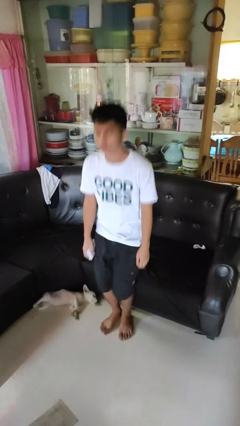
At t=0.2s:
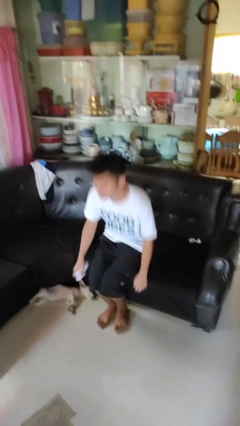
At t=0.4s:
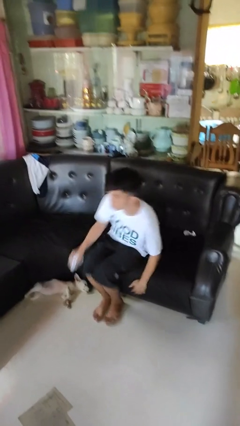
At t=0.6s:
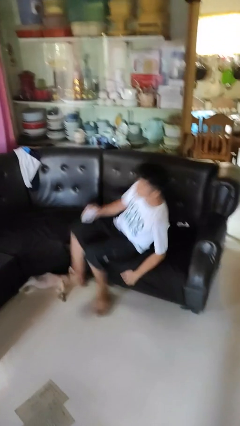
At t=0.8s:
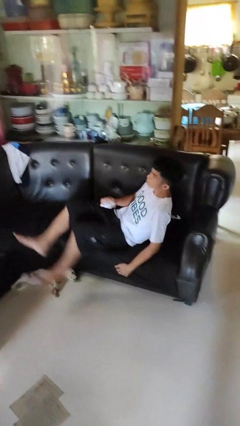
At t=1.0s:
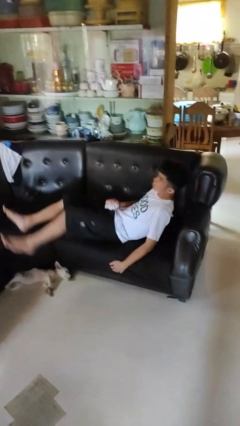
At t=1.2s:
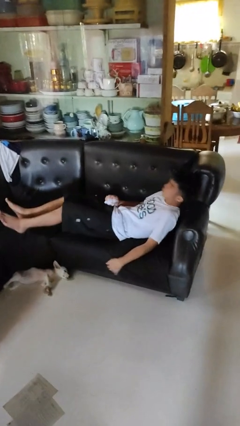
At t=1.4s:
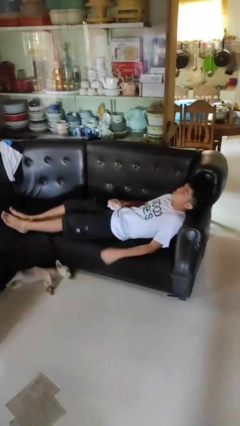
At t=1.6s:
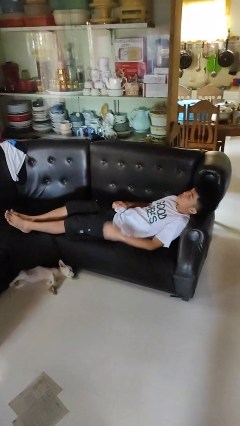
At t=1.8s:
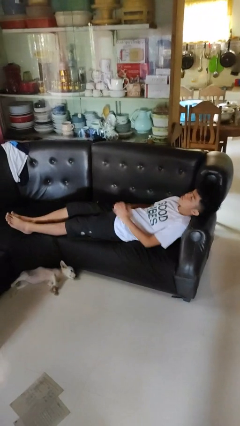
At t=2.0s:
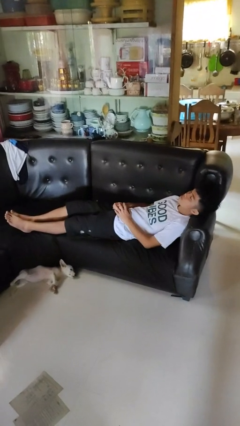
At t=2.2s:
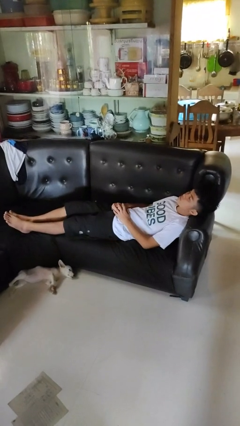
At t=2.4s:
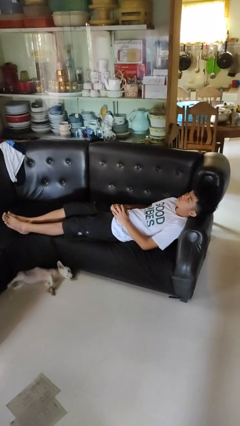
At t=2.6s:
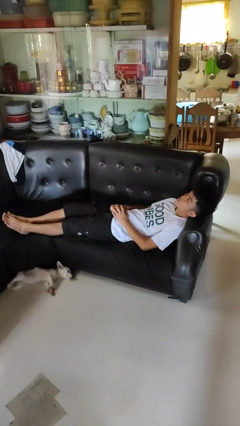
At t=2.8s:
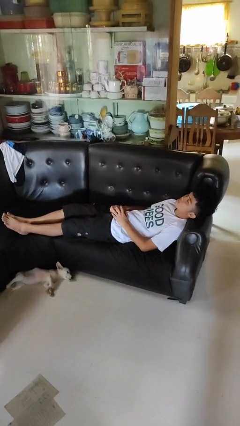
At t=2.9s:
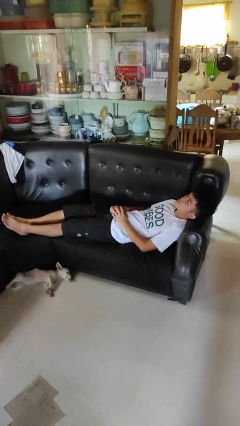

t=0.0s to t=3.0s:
person lies down on couch

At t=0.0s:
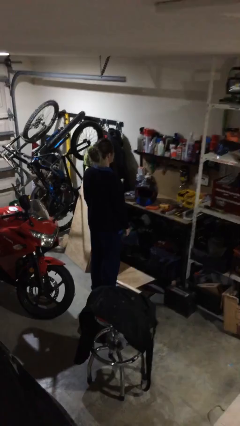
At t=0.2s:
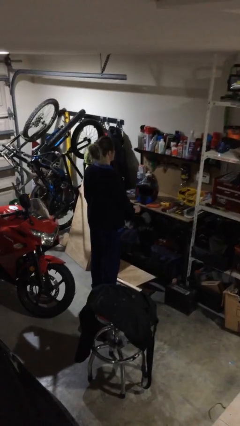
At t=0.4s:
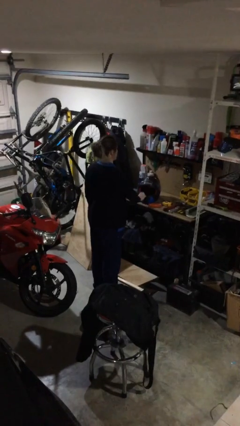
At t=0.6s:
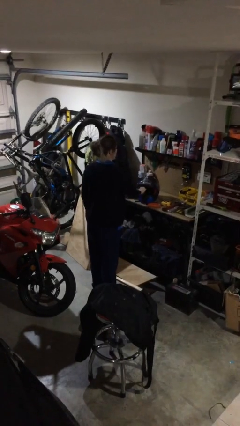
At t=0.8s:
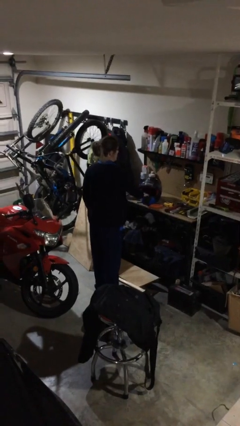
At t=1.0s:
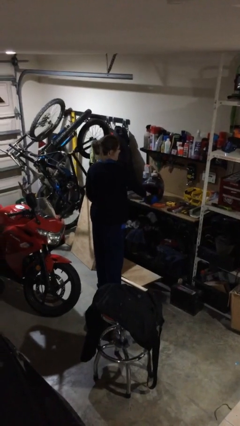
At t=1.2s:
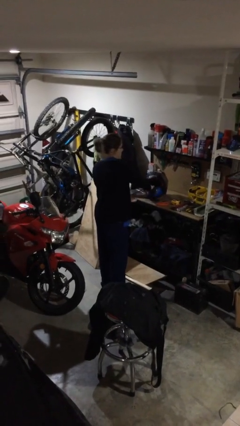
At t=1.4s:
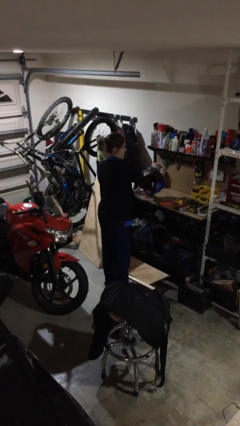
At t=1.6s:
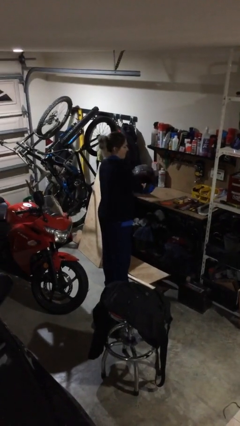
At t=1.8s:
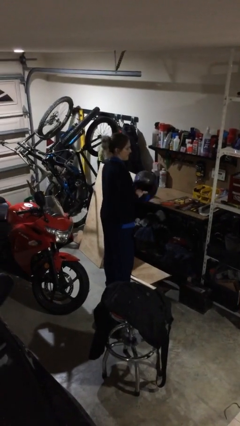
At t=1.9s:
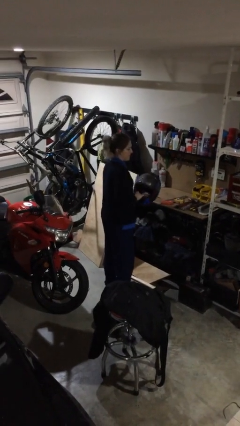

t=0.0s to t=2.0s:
person picks up object from table

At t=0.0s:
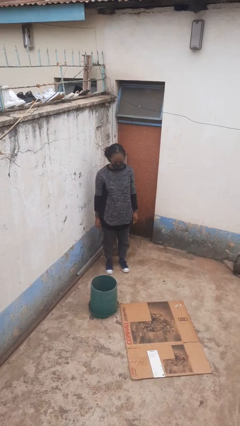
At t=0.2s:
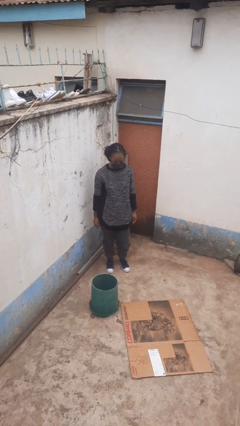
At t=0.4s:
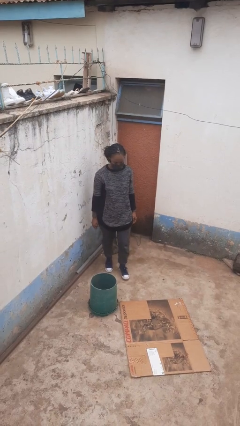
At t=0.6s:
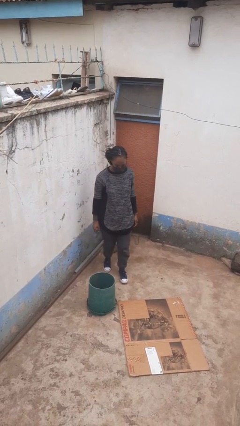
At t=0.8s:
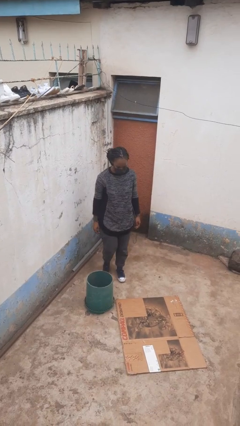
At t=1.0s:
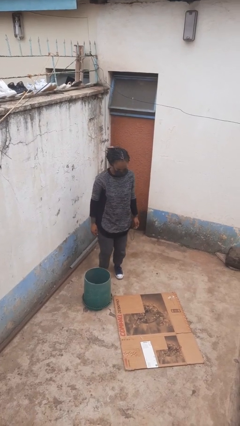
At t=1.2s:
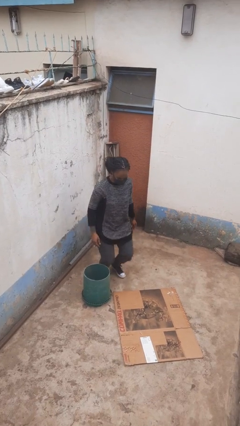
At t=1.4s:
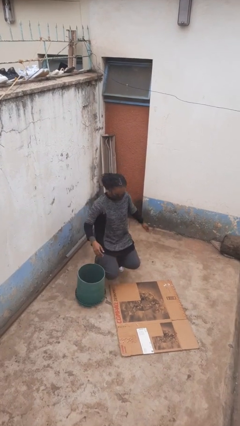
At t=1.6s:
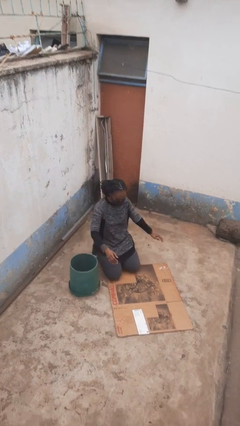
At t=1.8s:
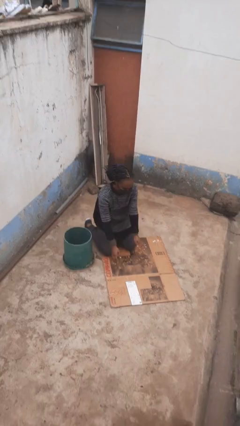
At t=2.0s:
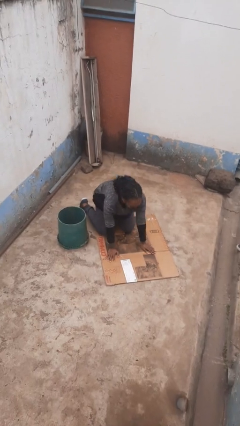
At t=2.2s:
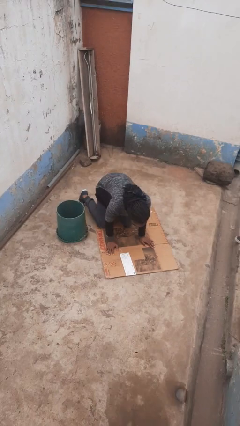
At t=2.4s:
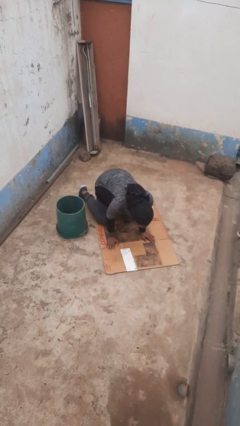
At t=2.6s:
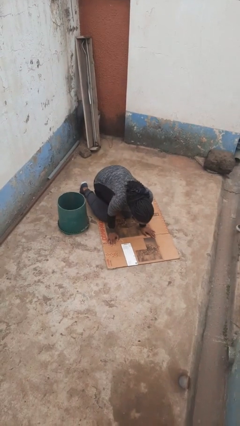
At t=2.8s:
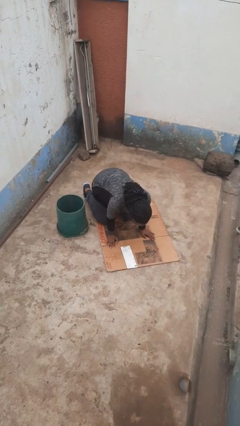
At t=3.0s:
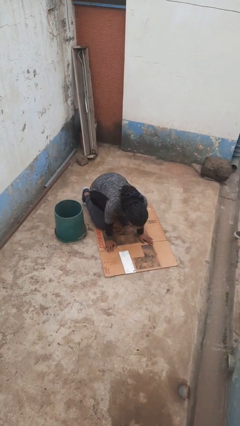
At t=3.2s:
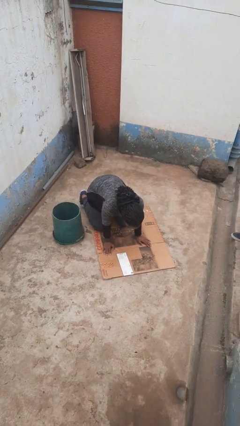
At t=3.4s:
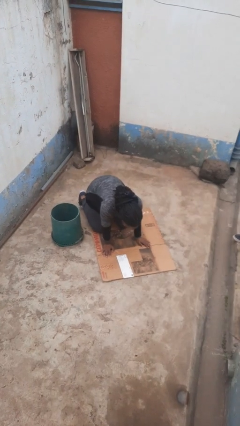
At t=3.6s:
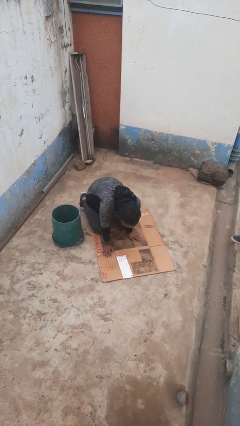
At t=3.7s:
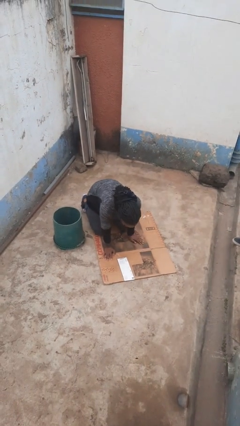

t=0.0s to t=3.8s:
person trips on object on floor

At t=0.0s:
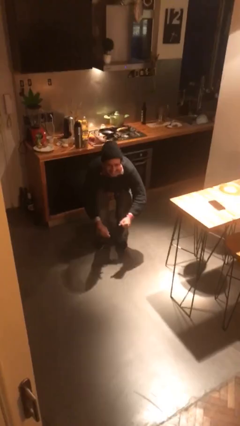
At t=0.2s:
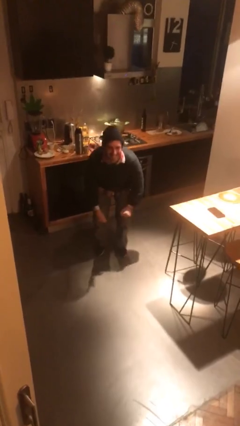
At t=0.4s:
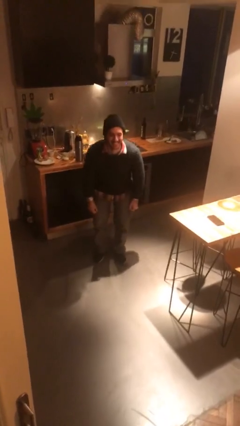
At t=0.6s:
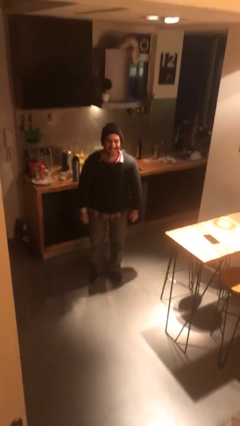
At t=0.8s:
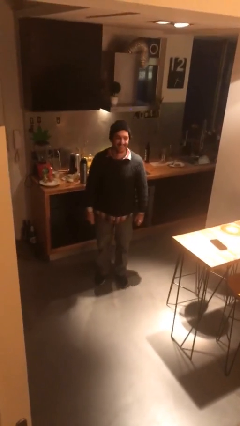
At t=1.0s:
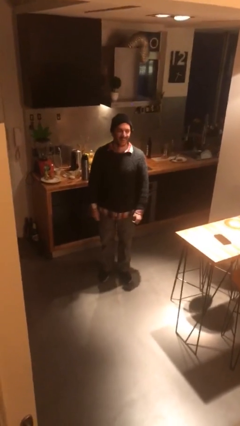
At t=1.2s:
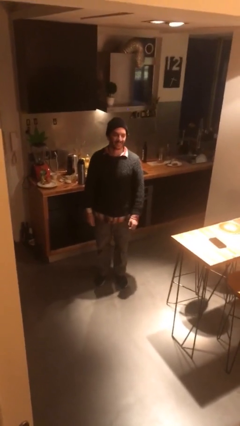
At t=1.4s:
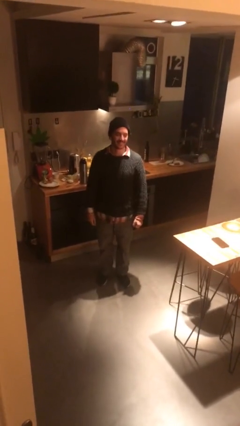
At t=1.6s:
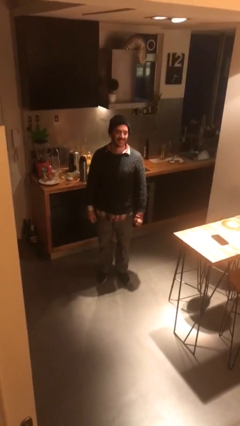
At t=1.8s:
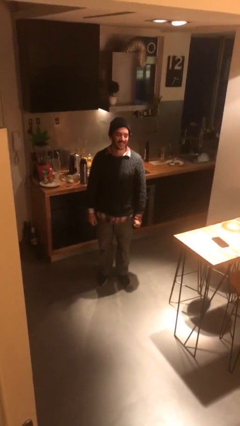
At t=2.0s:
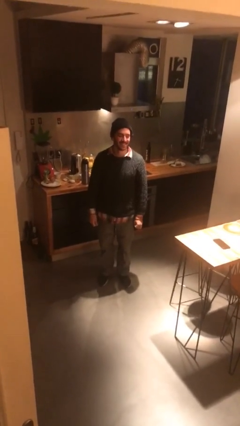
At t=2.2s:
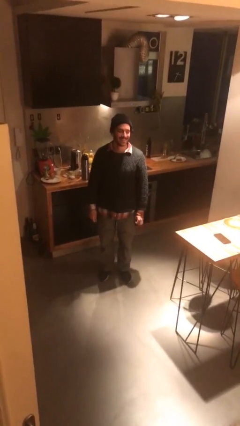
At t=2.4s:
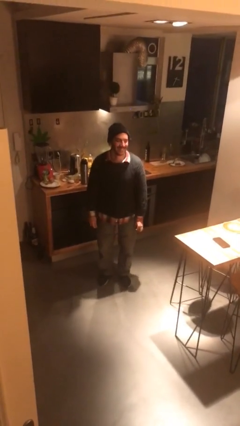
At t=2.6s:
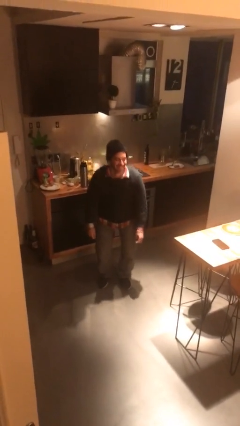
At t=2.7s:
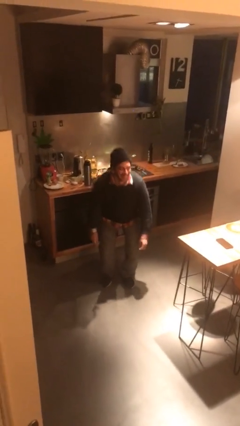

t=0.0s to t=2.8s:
person stands up

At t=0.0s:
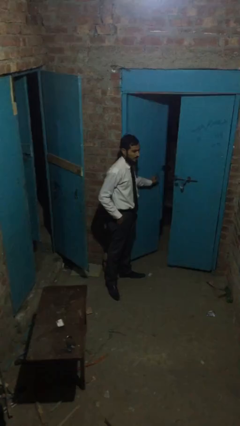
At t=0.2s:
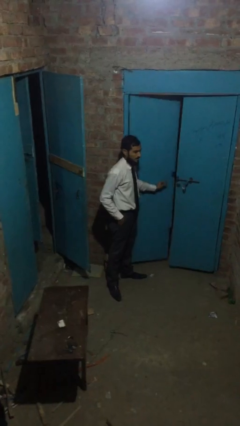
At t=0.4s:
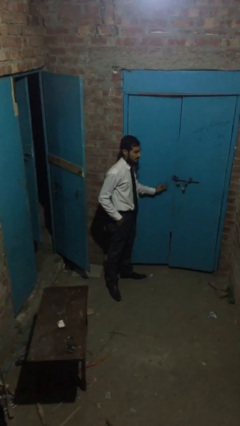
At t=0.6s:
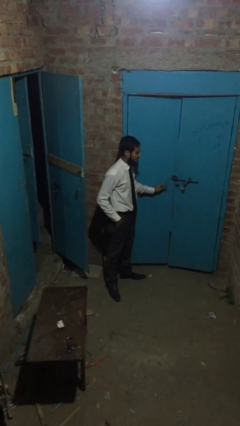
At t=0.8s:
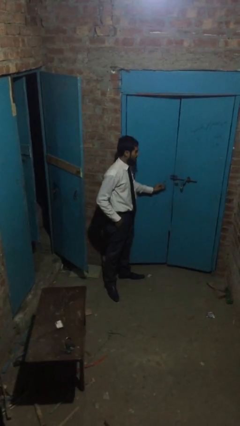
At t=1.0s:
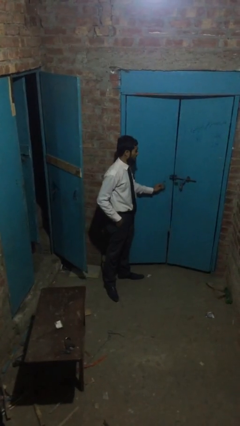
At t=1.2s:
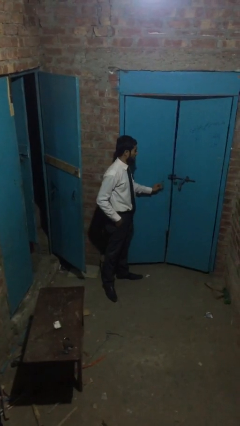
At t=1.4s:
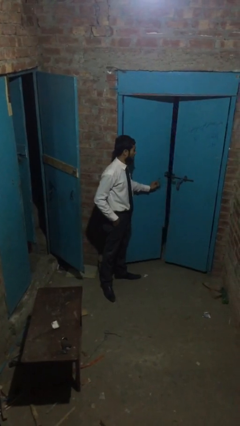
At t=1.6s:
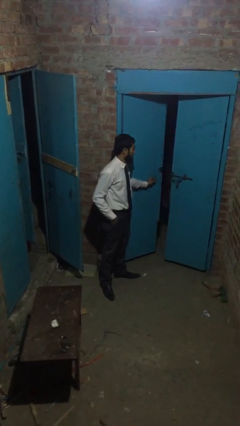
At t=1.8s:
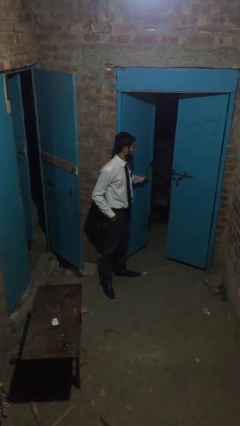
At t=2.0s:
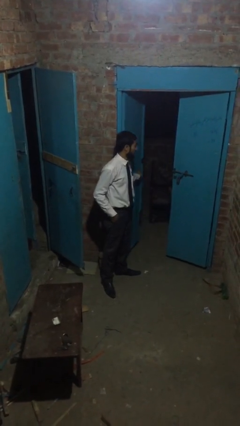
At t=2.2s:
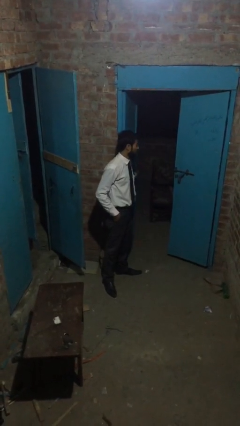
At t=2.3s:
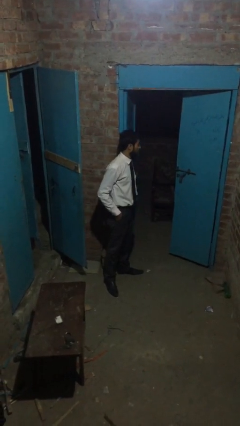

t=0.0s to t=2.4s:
person opens facility door

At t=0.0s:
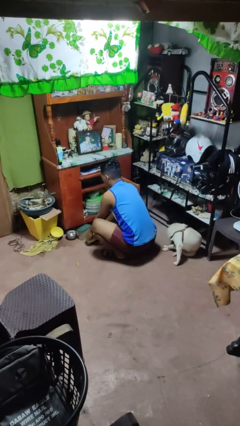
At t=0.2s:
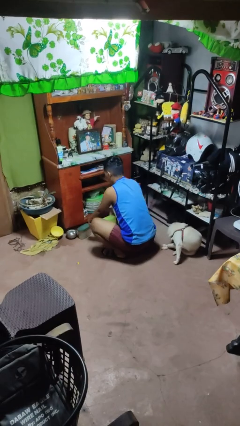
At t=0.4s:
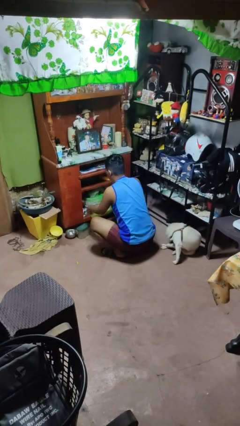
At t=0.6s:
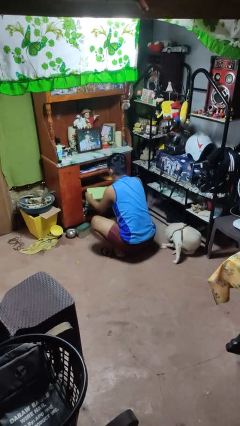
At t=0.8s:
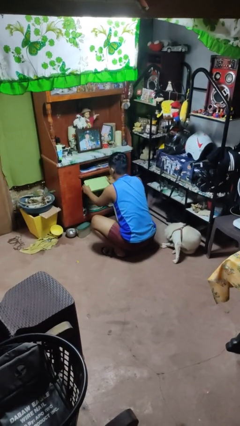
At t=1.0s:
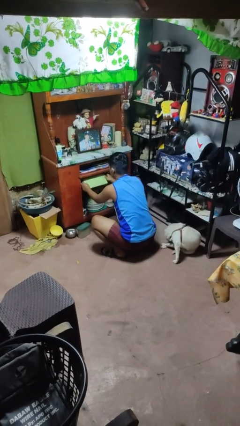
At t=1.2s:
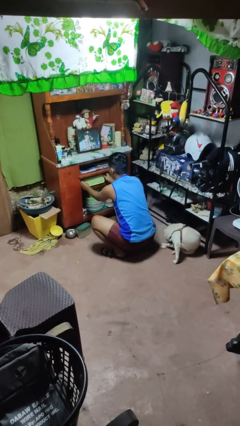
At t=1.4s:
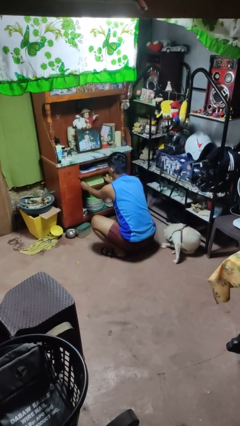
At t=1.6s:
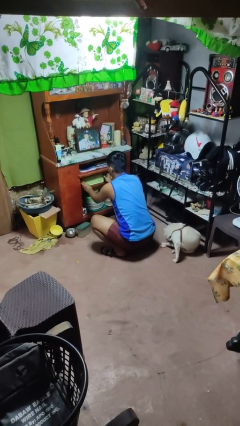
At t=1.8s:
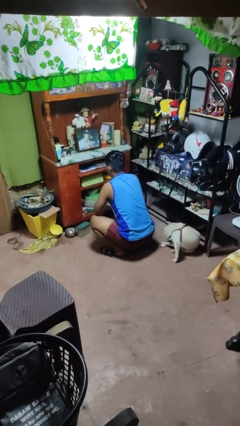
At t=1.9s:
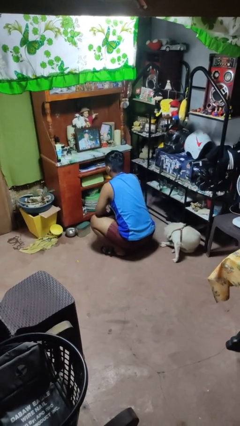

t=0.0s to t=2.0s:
person puts object in cabinet

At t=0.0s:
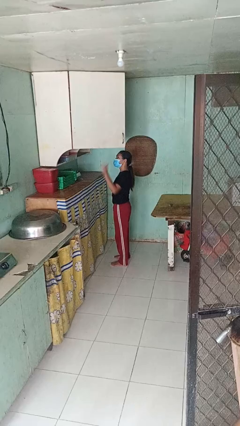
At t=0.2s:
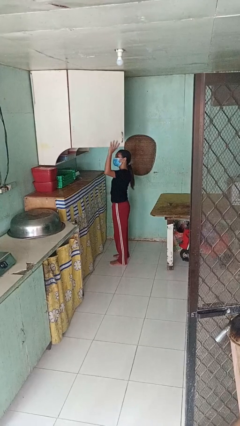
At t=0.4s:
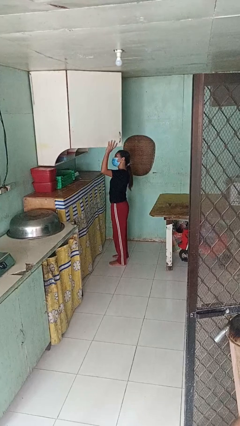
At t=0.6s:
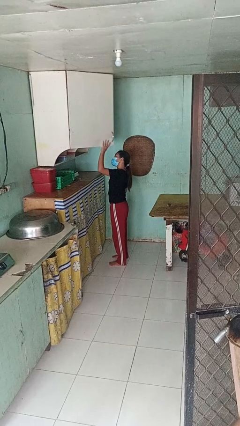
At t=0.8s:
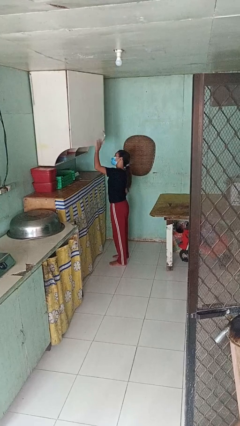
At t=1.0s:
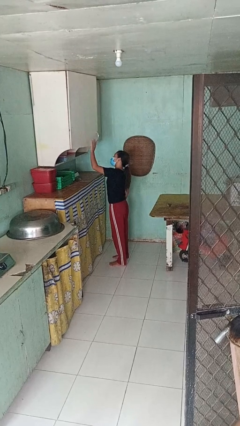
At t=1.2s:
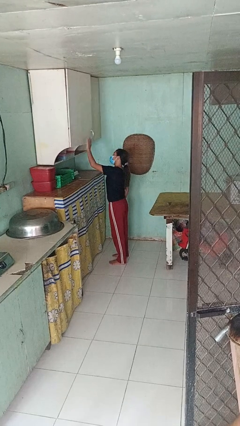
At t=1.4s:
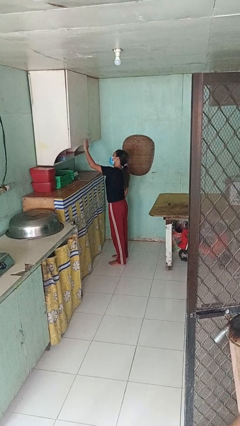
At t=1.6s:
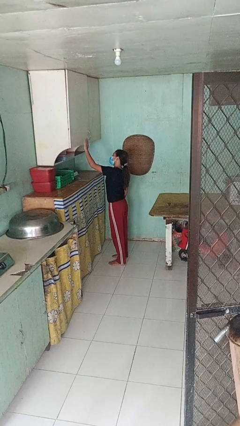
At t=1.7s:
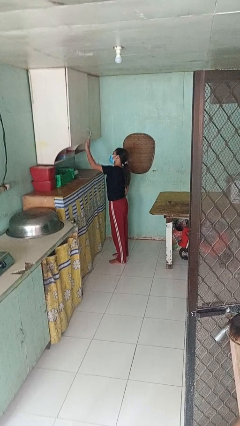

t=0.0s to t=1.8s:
person closes cabinet
